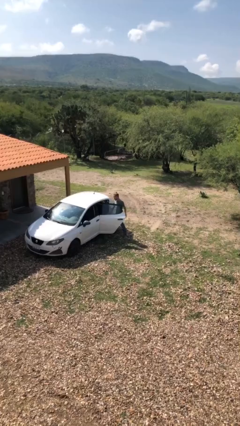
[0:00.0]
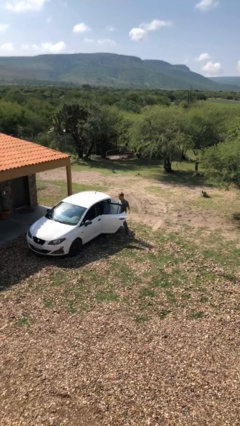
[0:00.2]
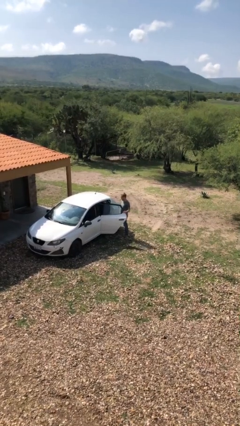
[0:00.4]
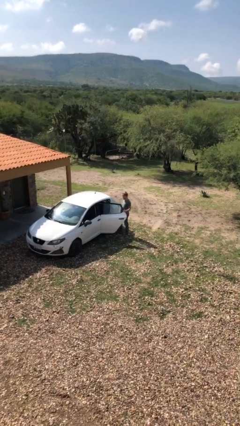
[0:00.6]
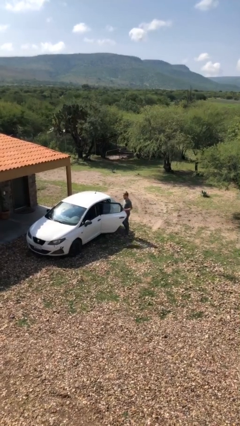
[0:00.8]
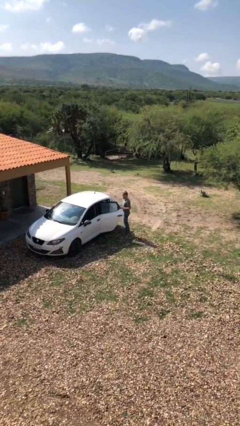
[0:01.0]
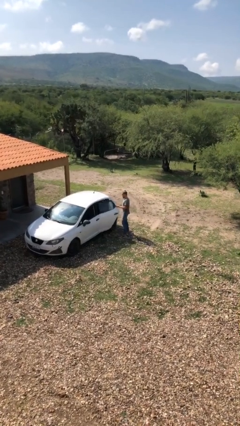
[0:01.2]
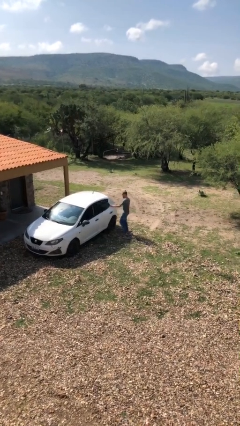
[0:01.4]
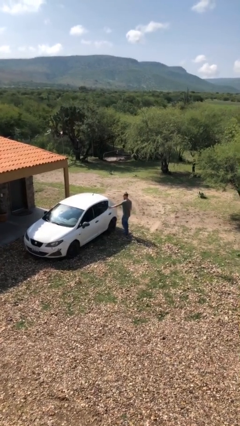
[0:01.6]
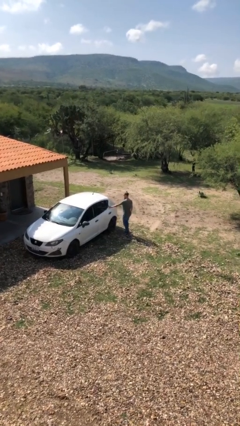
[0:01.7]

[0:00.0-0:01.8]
person closes car door

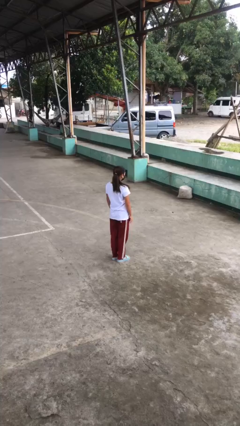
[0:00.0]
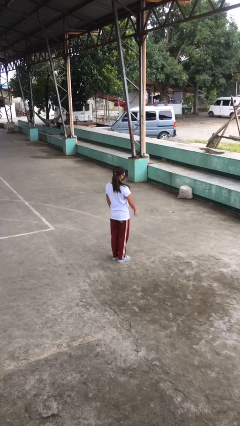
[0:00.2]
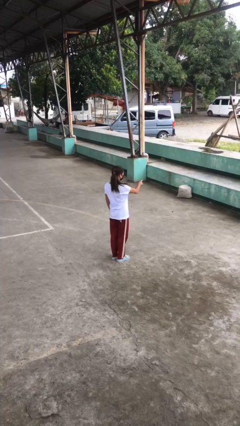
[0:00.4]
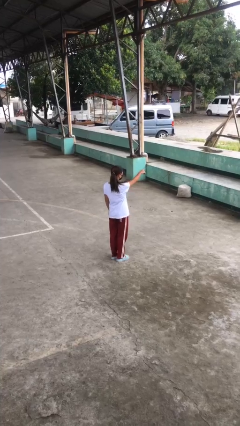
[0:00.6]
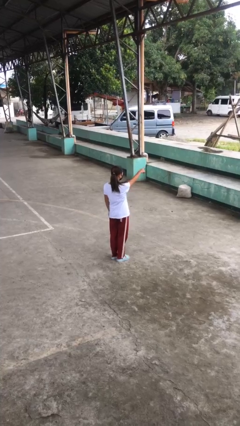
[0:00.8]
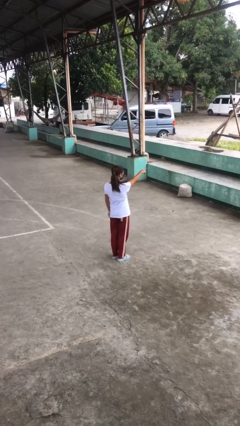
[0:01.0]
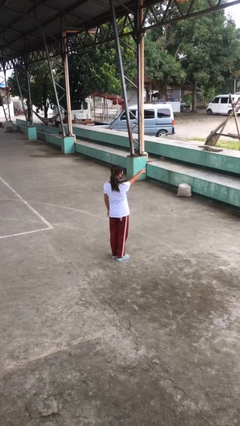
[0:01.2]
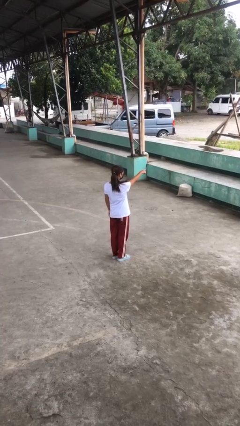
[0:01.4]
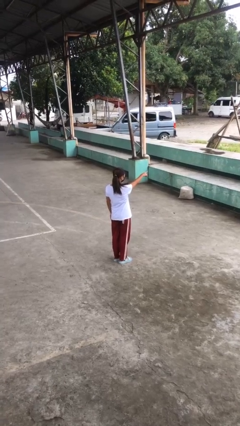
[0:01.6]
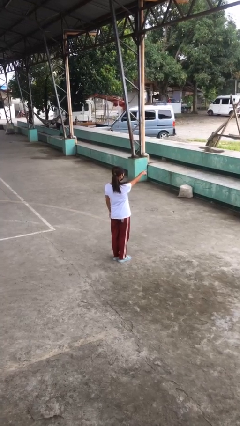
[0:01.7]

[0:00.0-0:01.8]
person points at person

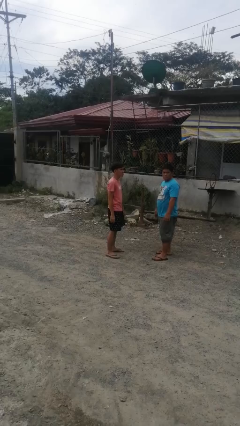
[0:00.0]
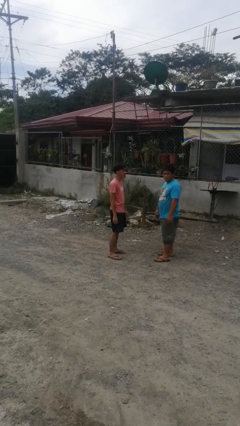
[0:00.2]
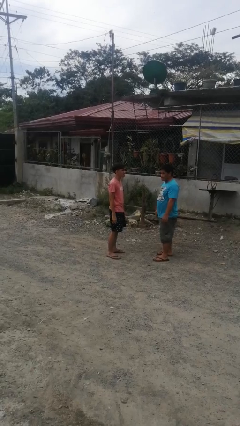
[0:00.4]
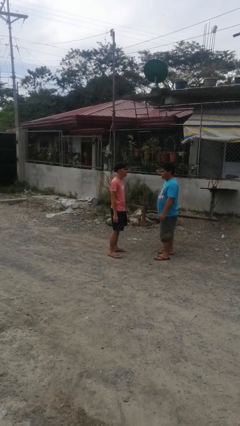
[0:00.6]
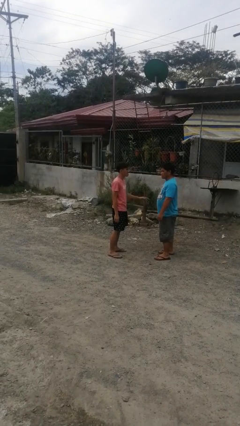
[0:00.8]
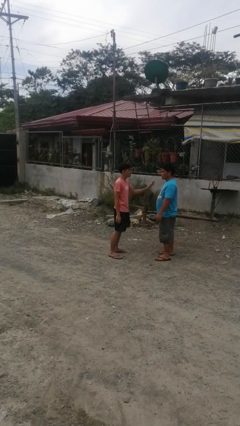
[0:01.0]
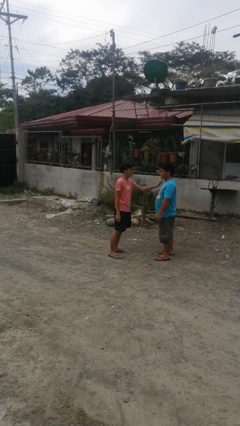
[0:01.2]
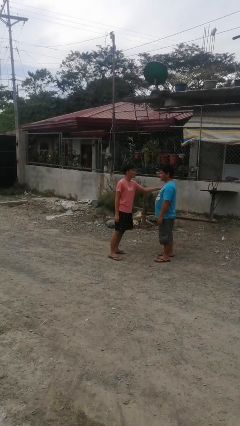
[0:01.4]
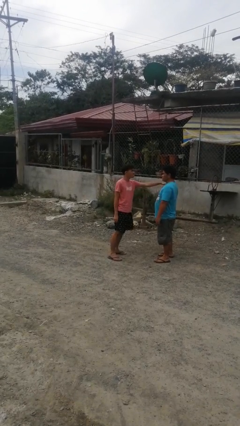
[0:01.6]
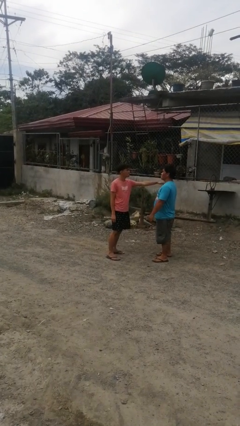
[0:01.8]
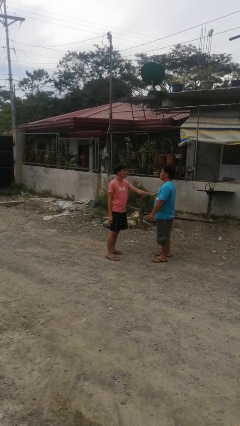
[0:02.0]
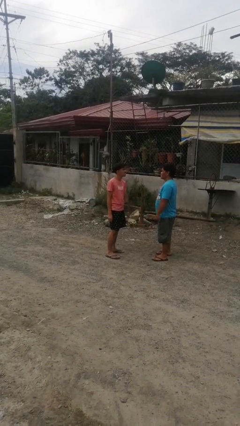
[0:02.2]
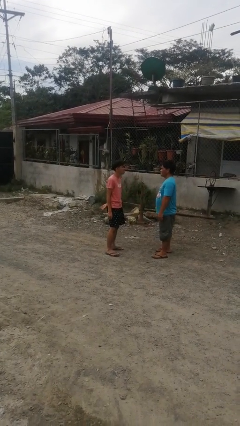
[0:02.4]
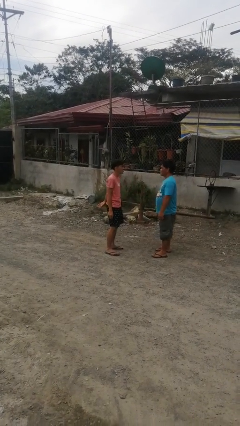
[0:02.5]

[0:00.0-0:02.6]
person shoves person

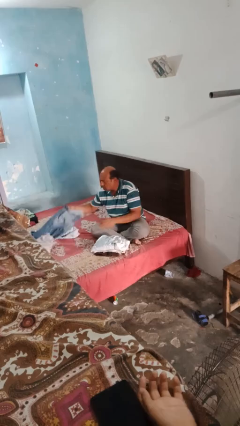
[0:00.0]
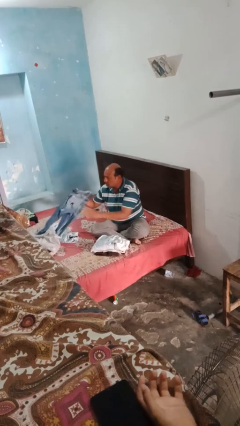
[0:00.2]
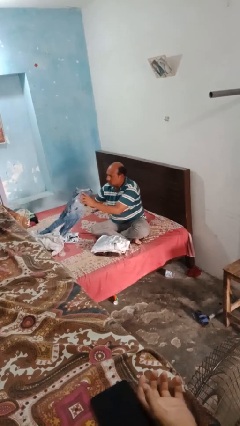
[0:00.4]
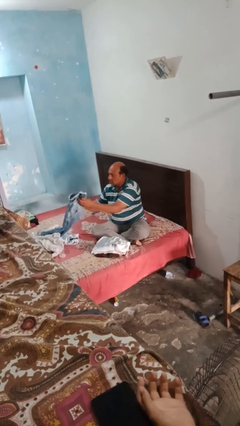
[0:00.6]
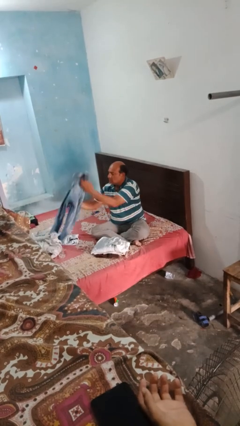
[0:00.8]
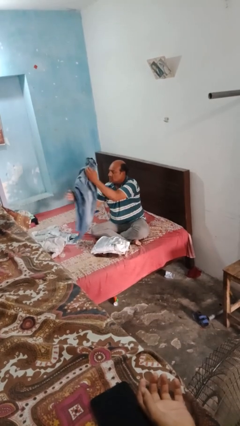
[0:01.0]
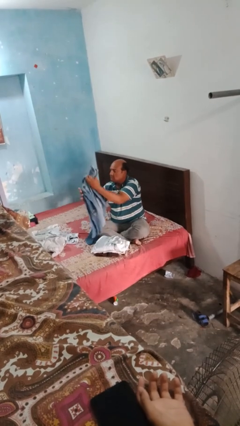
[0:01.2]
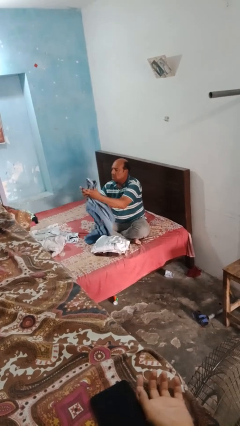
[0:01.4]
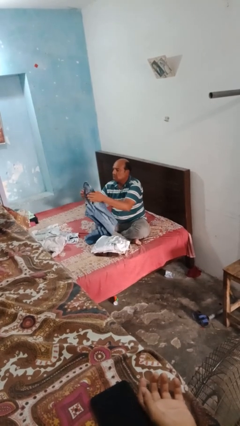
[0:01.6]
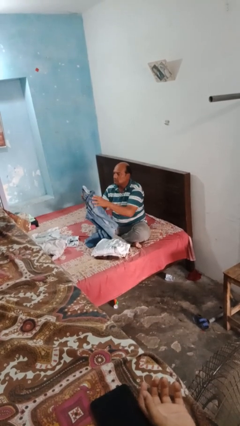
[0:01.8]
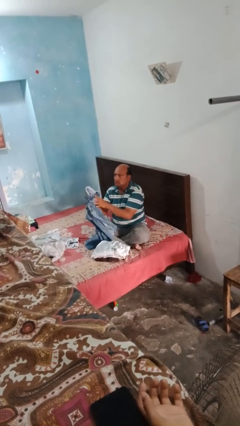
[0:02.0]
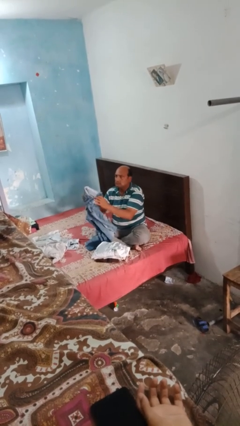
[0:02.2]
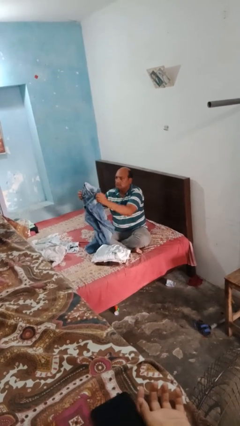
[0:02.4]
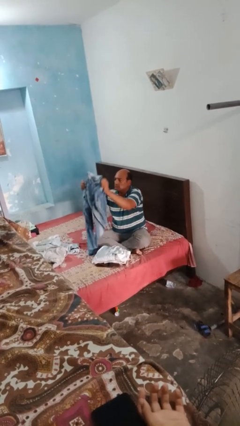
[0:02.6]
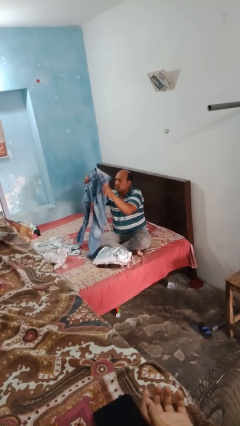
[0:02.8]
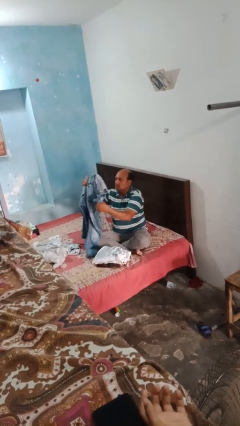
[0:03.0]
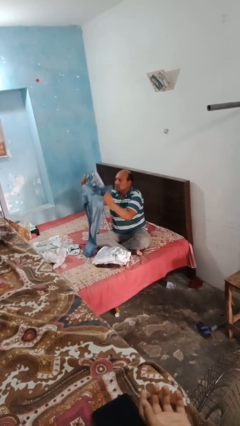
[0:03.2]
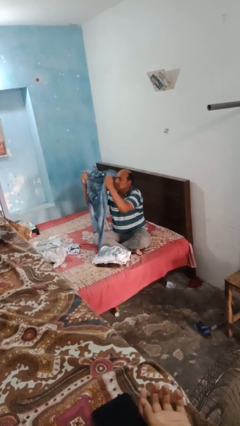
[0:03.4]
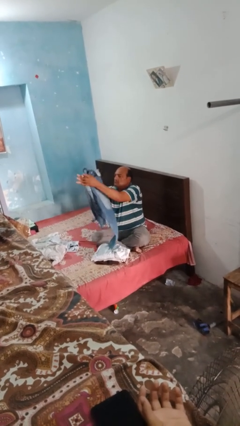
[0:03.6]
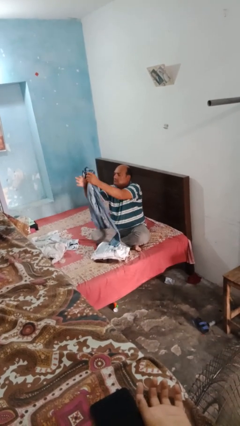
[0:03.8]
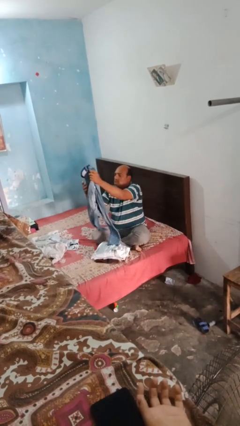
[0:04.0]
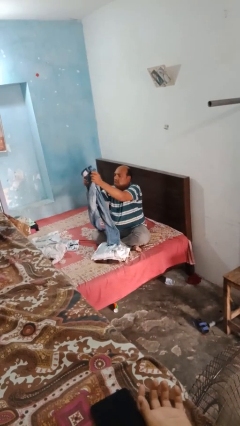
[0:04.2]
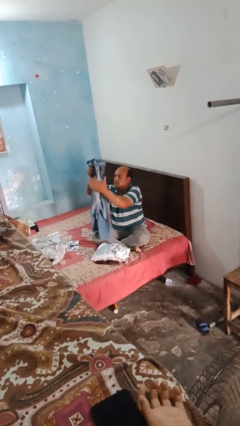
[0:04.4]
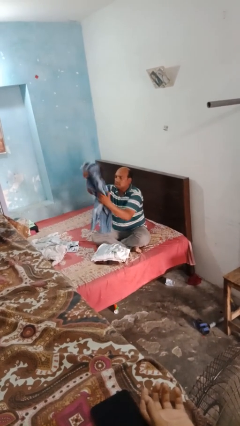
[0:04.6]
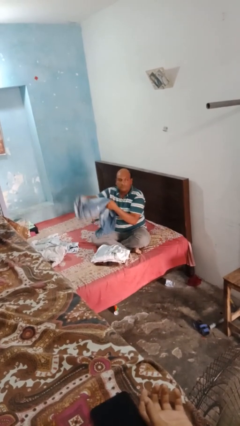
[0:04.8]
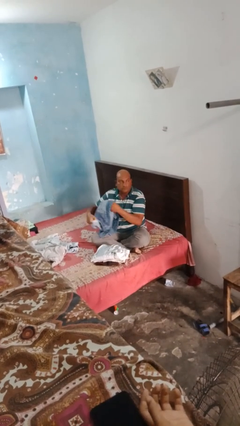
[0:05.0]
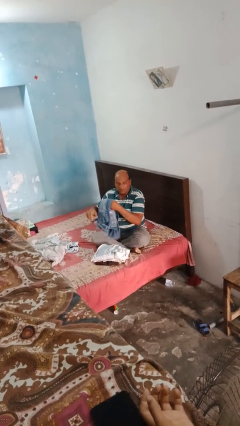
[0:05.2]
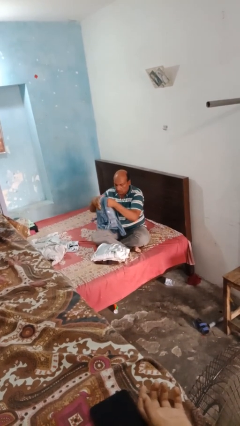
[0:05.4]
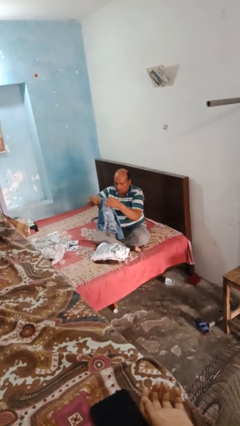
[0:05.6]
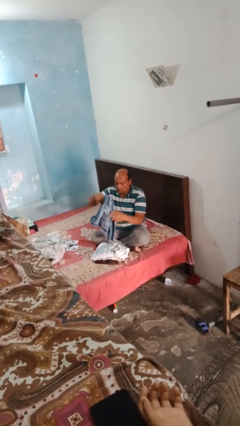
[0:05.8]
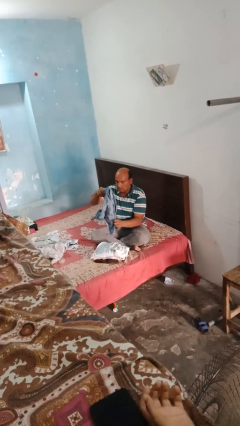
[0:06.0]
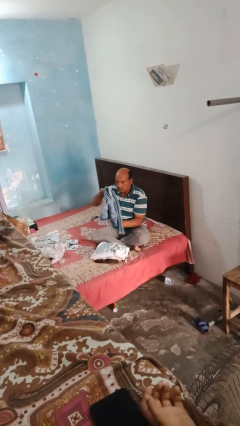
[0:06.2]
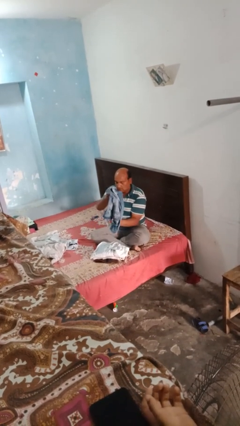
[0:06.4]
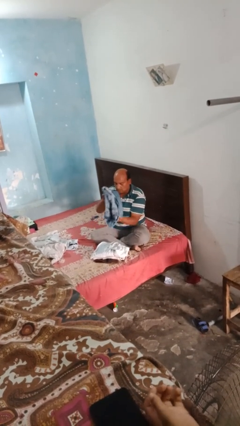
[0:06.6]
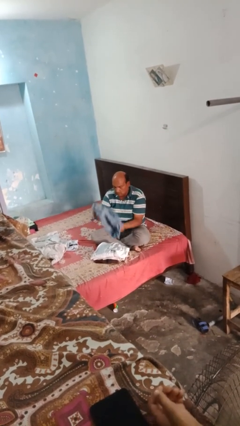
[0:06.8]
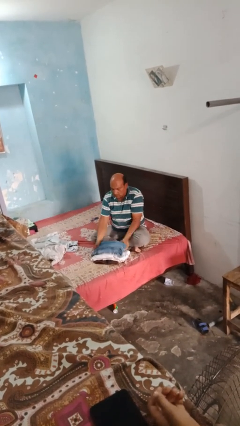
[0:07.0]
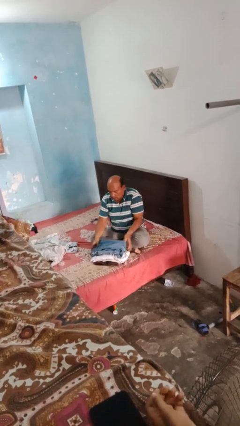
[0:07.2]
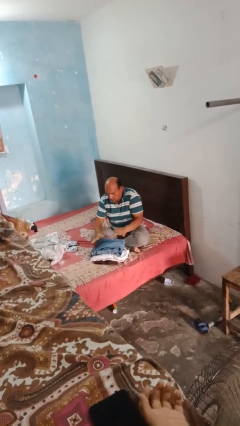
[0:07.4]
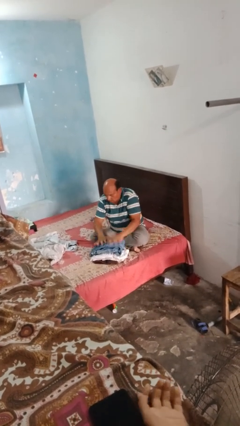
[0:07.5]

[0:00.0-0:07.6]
person folds pants

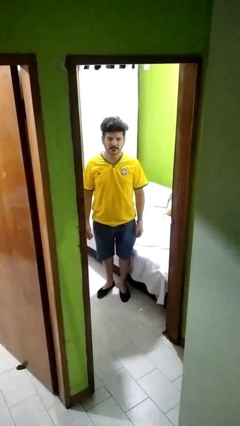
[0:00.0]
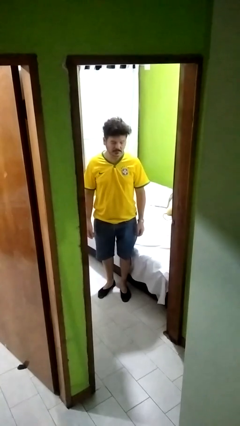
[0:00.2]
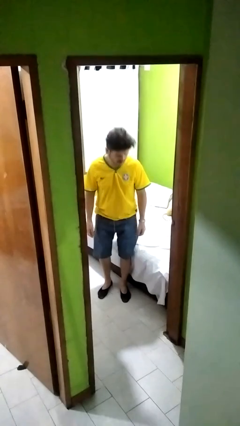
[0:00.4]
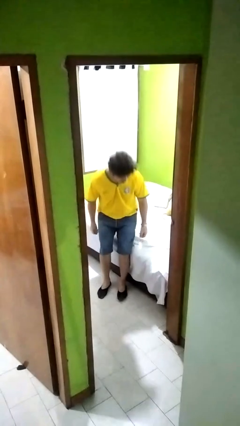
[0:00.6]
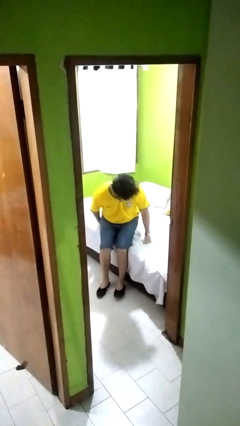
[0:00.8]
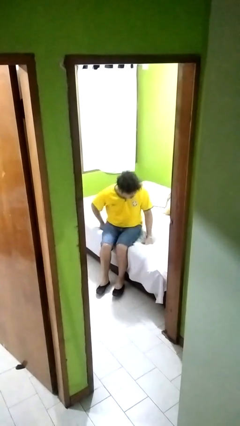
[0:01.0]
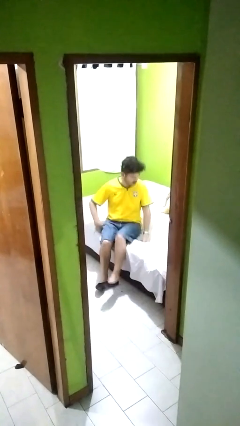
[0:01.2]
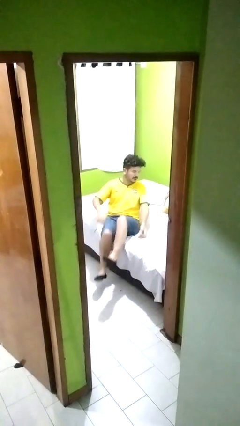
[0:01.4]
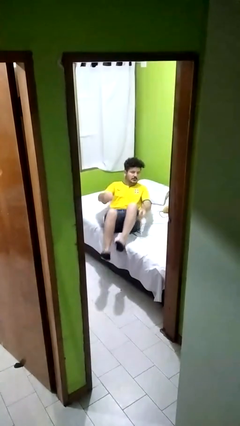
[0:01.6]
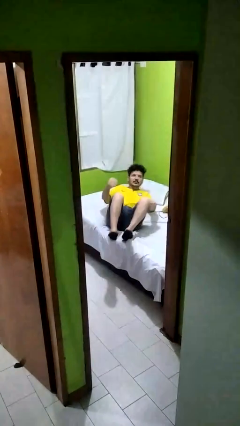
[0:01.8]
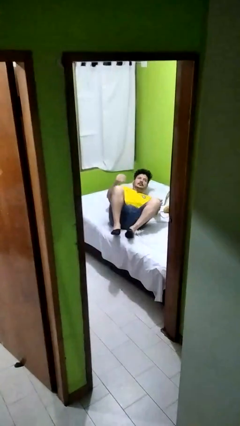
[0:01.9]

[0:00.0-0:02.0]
person lies down on bed

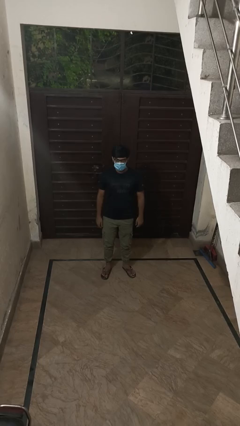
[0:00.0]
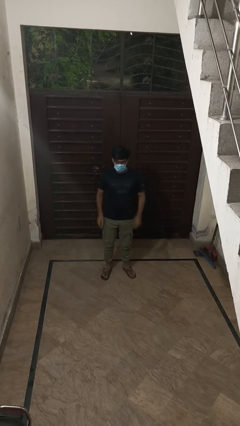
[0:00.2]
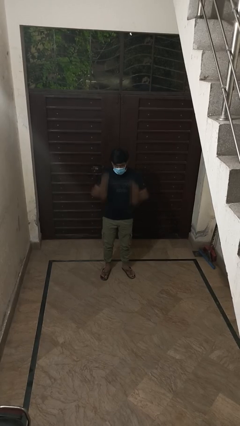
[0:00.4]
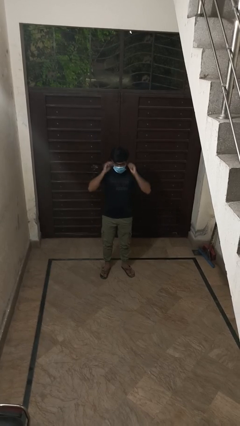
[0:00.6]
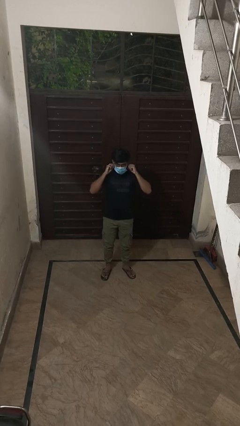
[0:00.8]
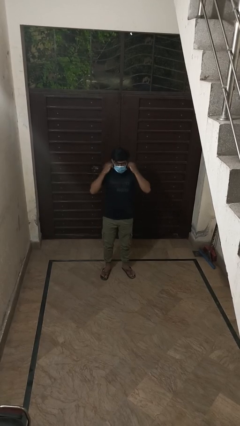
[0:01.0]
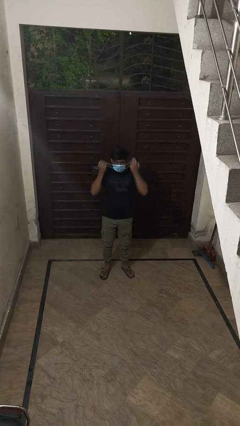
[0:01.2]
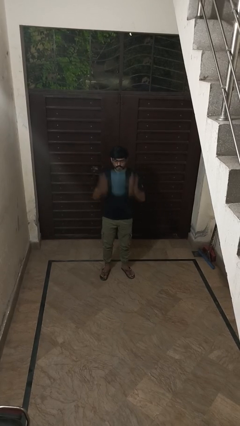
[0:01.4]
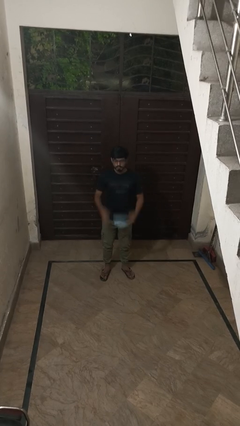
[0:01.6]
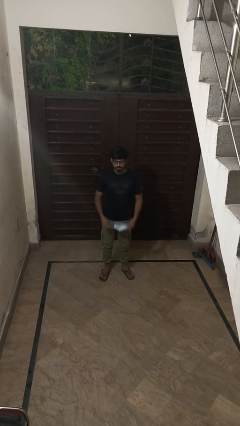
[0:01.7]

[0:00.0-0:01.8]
person takes off facemask
